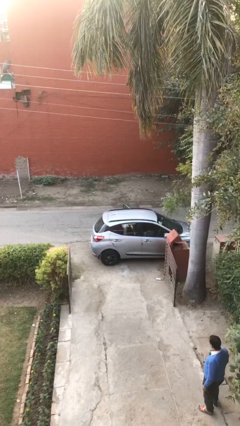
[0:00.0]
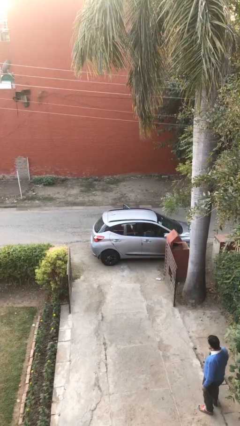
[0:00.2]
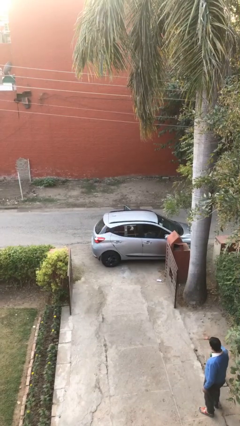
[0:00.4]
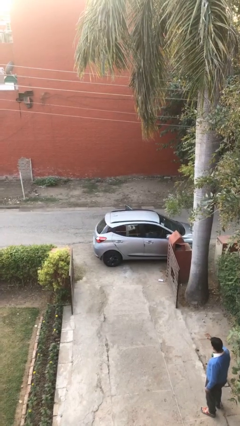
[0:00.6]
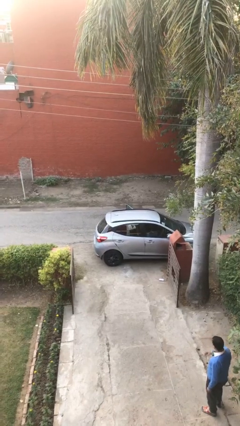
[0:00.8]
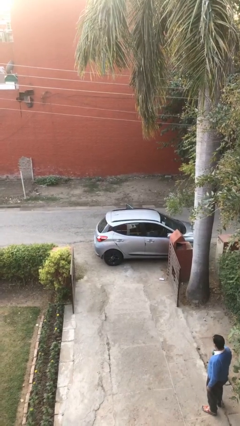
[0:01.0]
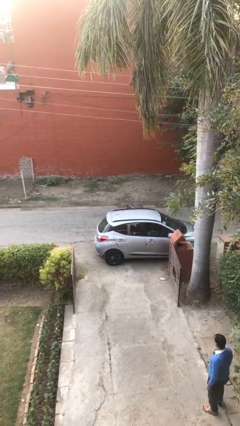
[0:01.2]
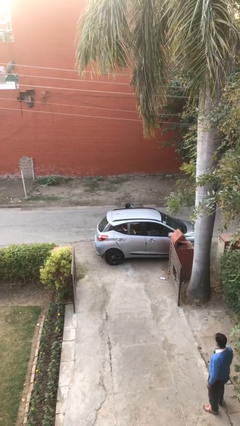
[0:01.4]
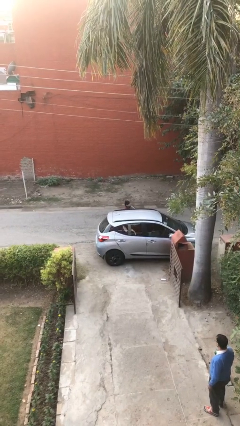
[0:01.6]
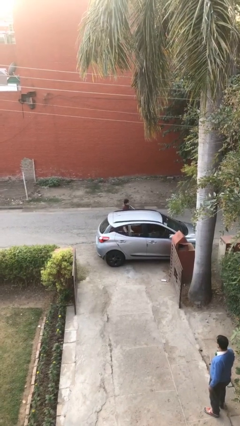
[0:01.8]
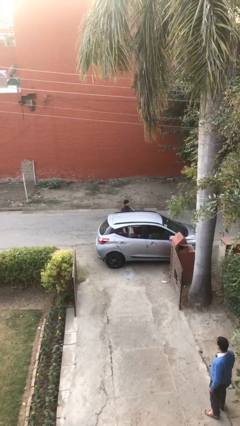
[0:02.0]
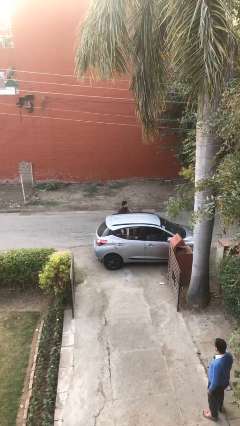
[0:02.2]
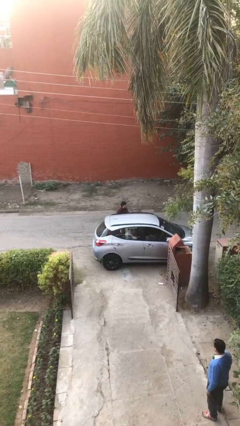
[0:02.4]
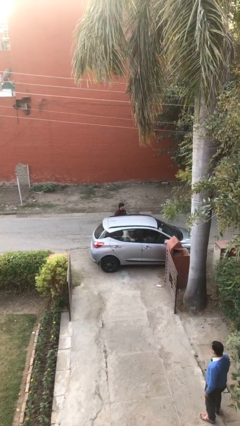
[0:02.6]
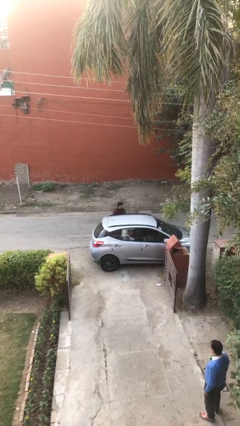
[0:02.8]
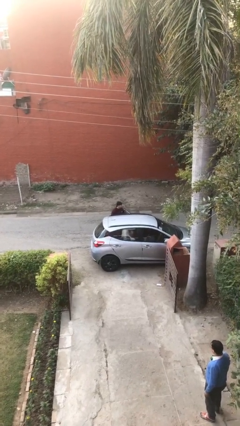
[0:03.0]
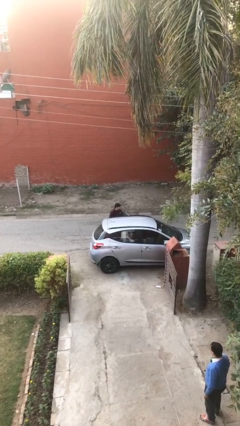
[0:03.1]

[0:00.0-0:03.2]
person exits car

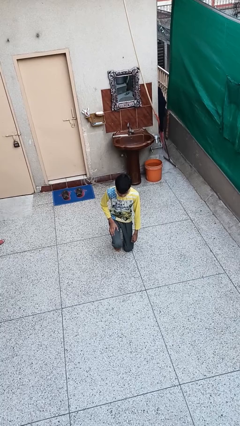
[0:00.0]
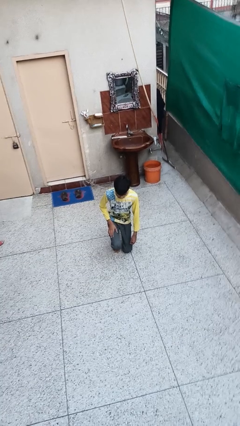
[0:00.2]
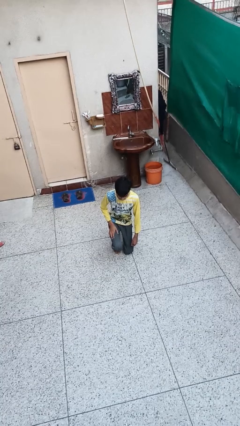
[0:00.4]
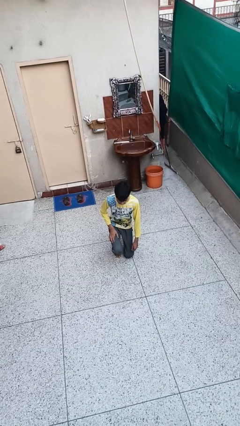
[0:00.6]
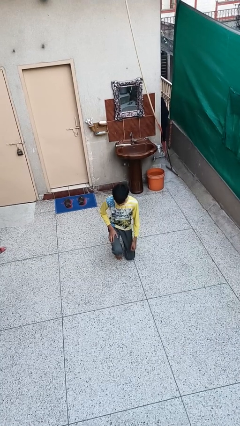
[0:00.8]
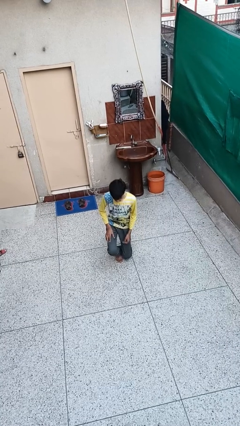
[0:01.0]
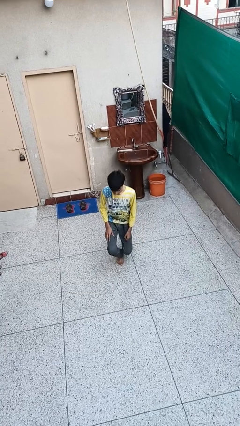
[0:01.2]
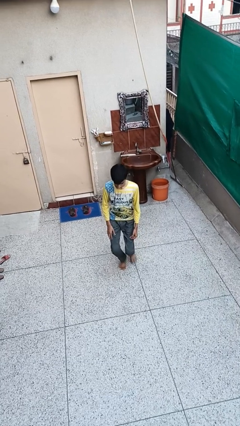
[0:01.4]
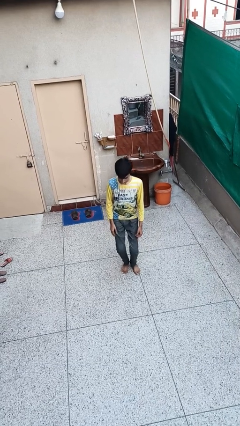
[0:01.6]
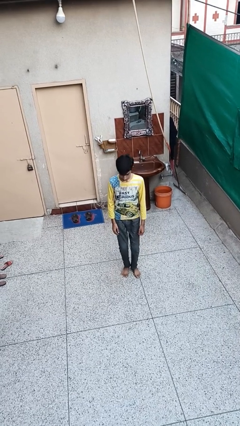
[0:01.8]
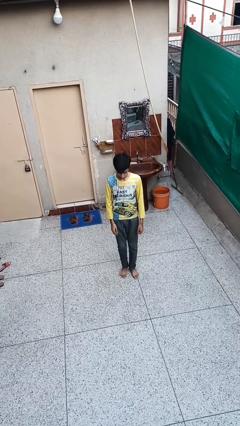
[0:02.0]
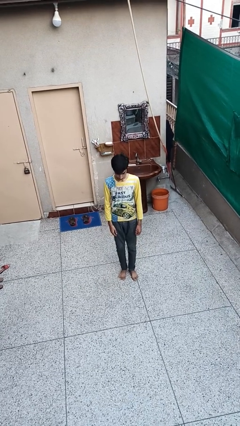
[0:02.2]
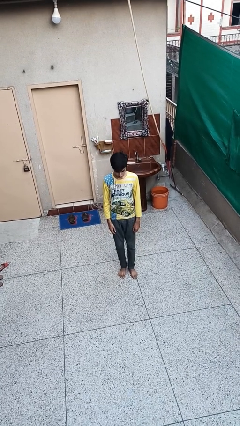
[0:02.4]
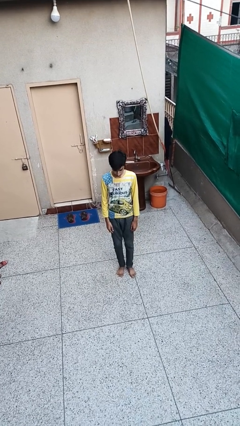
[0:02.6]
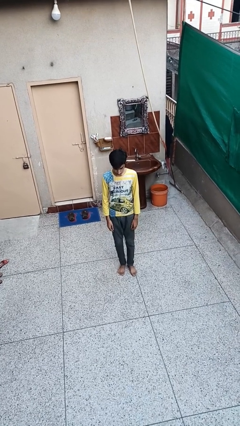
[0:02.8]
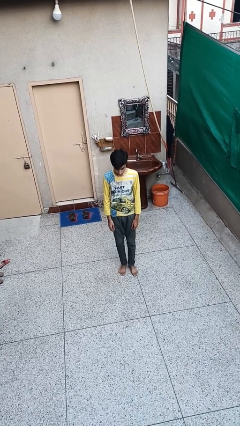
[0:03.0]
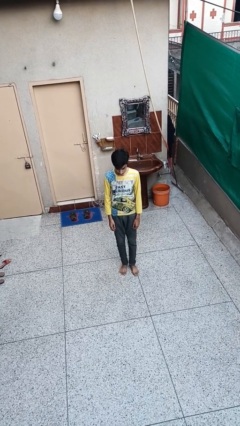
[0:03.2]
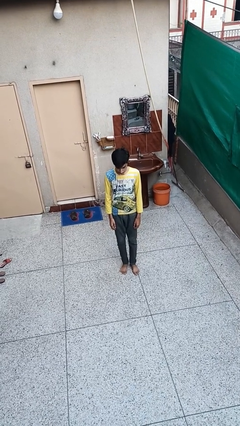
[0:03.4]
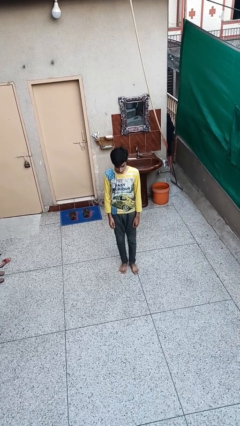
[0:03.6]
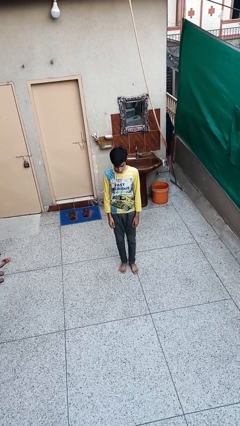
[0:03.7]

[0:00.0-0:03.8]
person stands up from floor

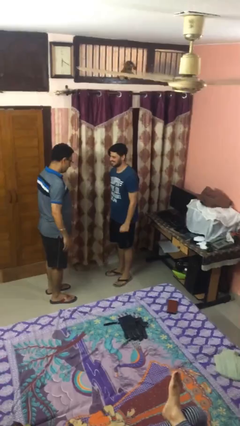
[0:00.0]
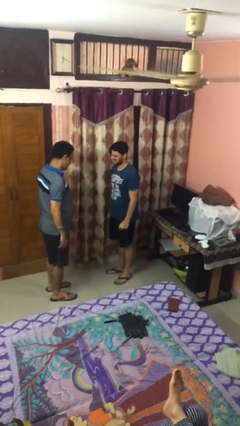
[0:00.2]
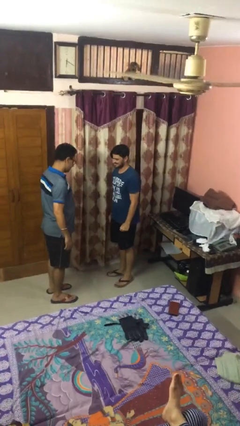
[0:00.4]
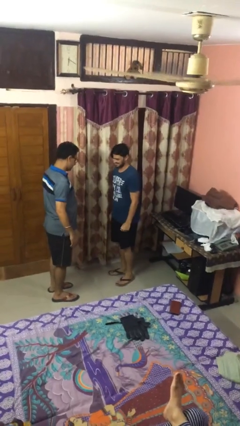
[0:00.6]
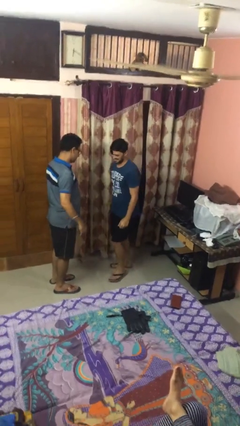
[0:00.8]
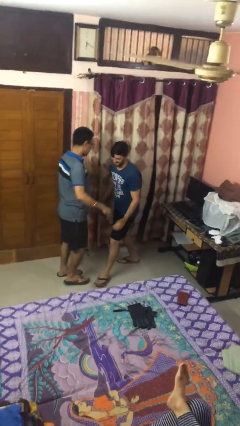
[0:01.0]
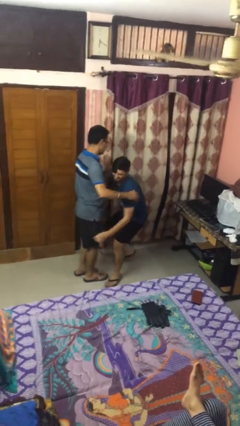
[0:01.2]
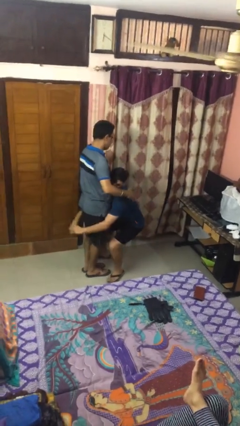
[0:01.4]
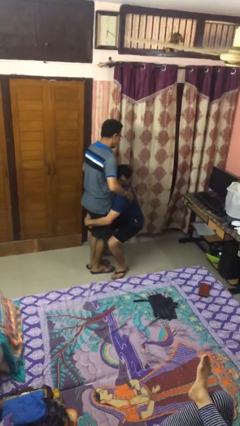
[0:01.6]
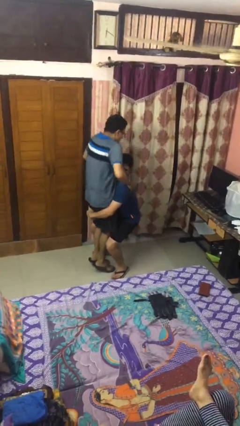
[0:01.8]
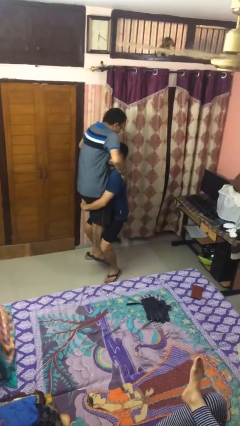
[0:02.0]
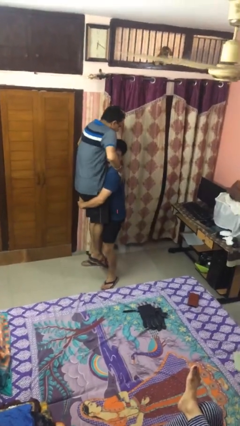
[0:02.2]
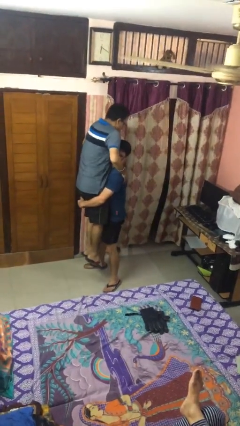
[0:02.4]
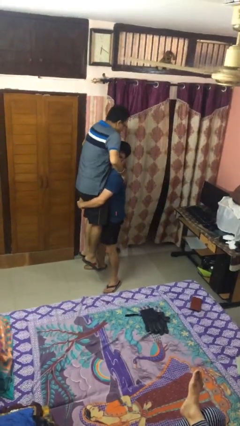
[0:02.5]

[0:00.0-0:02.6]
person picks up person

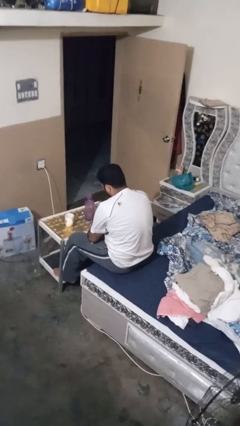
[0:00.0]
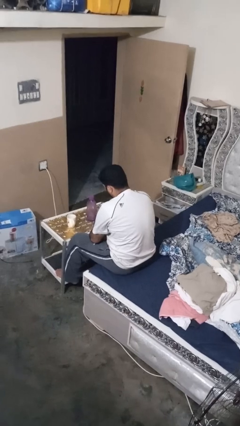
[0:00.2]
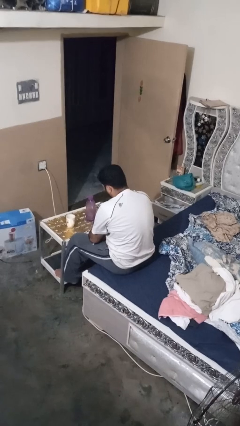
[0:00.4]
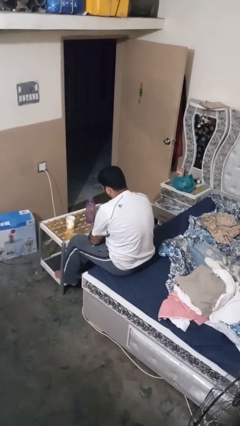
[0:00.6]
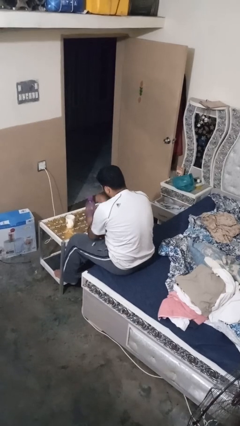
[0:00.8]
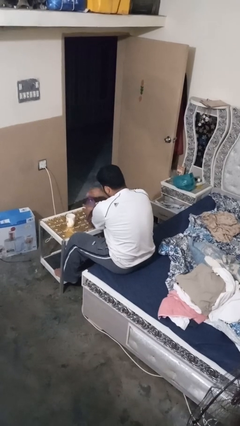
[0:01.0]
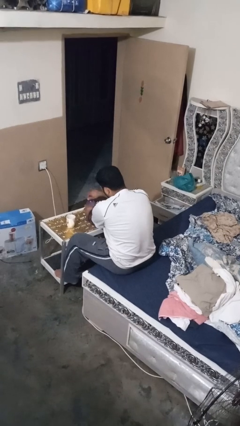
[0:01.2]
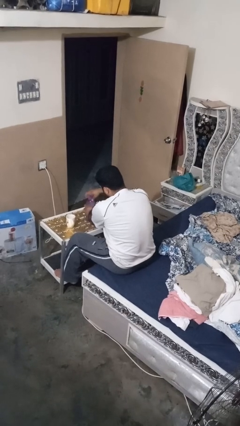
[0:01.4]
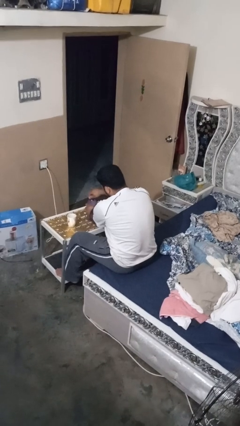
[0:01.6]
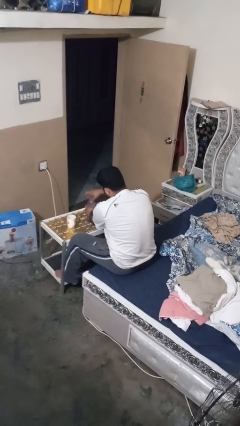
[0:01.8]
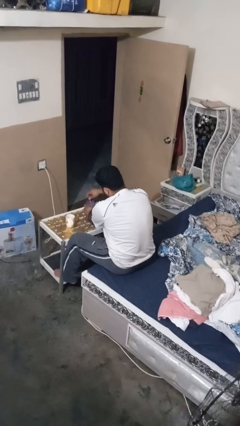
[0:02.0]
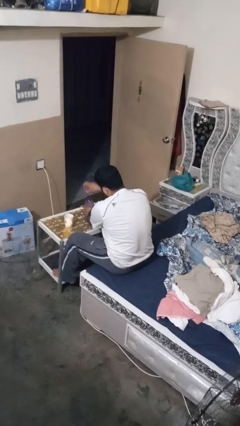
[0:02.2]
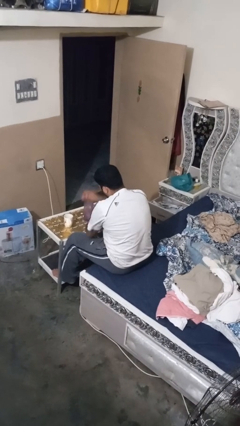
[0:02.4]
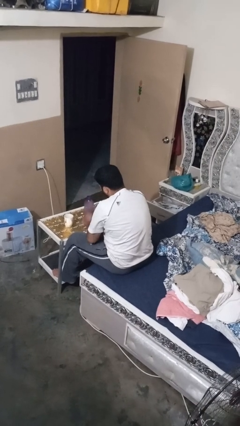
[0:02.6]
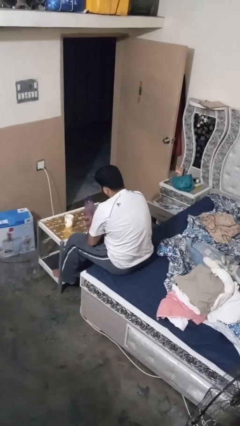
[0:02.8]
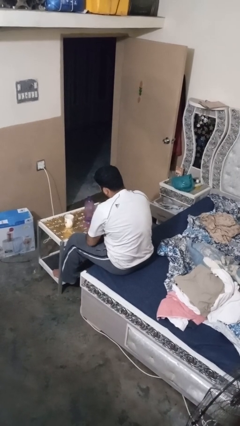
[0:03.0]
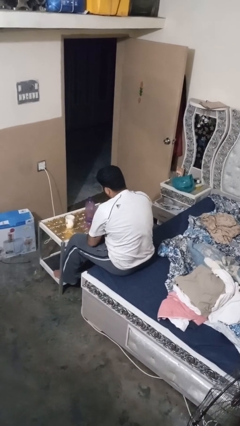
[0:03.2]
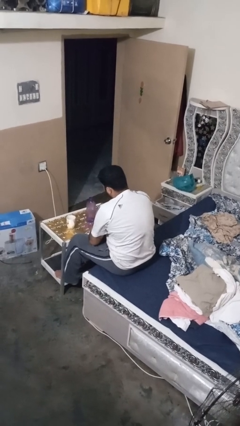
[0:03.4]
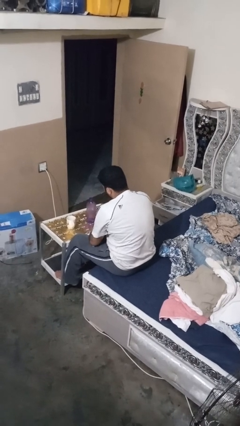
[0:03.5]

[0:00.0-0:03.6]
person unscrews lid from bottle

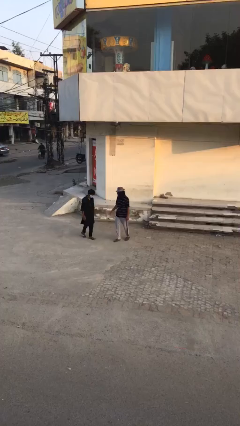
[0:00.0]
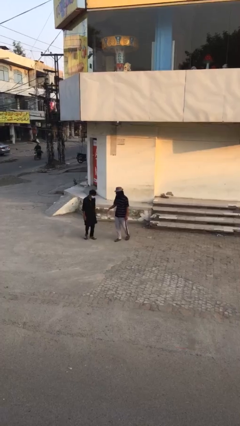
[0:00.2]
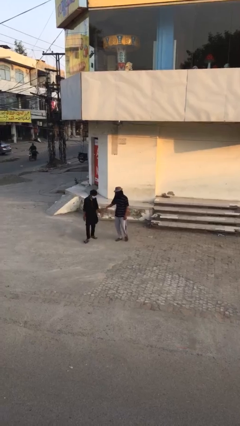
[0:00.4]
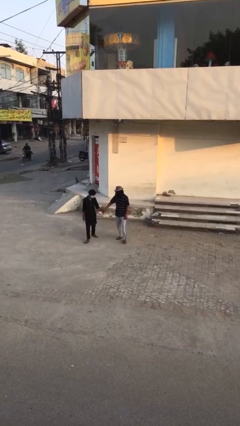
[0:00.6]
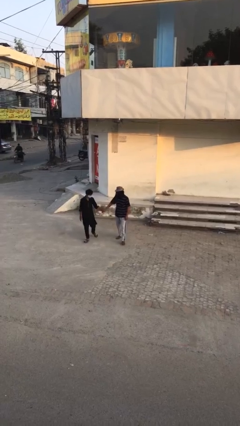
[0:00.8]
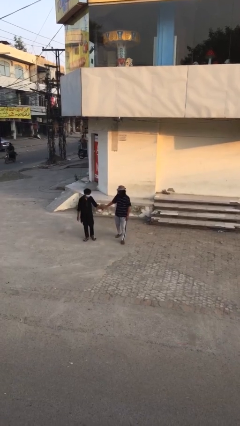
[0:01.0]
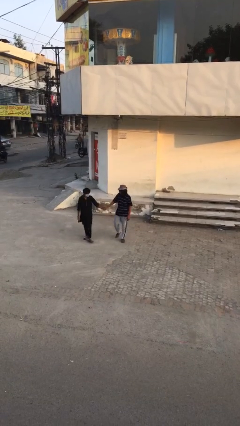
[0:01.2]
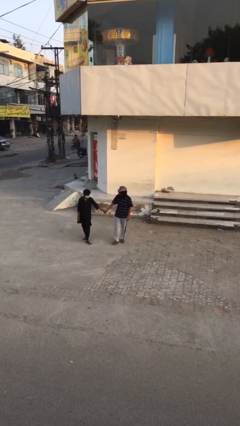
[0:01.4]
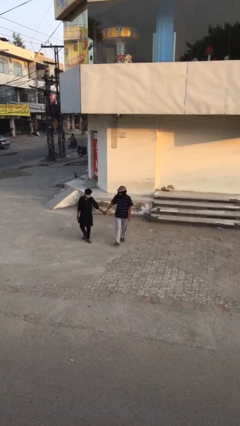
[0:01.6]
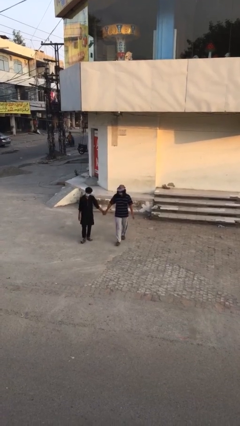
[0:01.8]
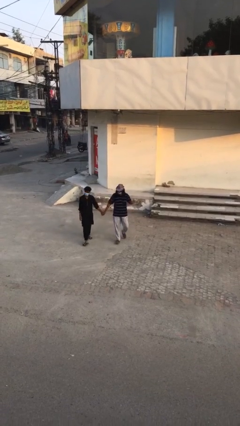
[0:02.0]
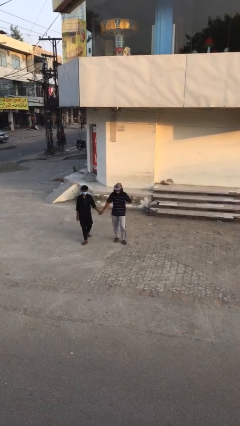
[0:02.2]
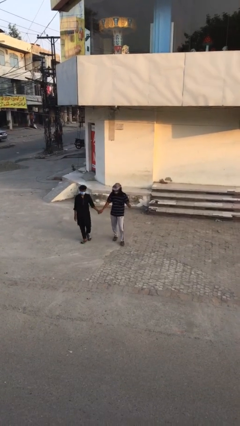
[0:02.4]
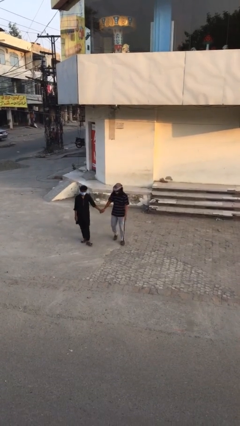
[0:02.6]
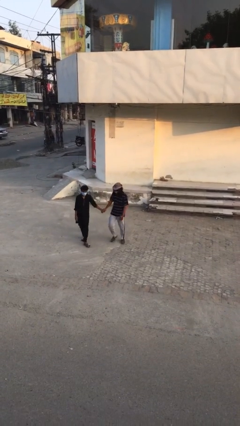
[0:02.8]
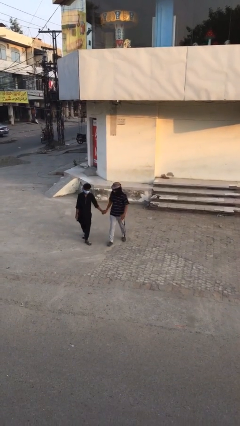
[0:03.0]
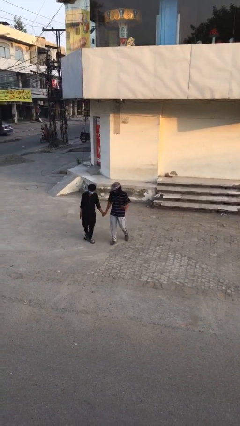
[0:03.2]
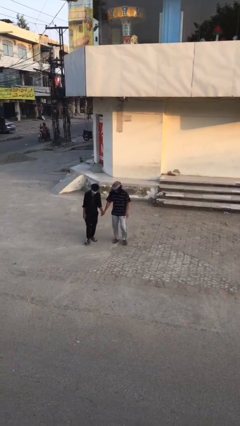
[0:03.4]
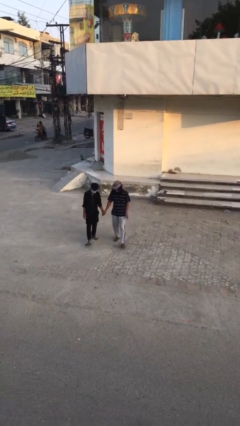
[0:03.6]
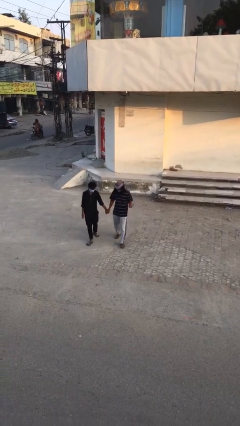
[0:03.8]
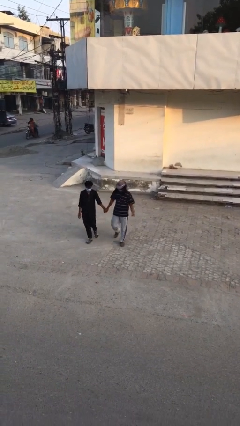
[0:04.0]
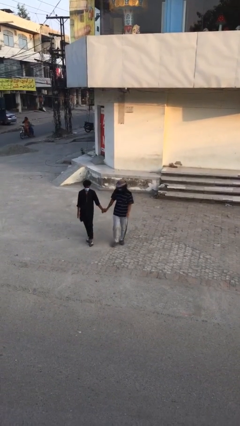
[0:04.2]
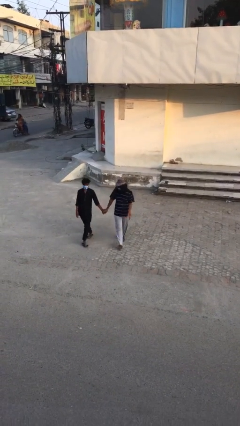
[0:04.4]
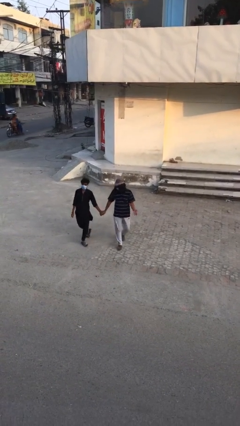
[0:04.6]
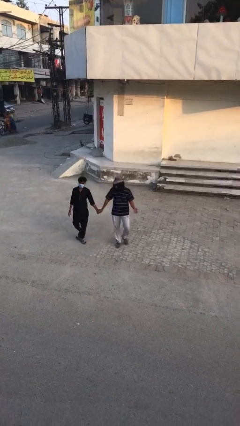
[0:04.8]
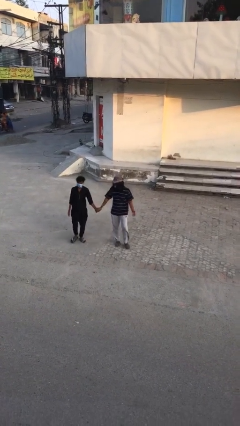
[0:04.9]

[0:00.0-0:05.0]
person holds hand
